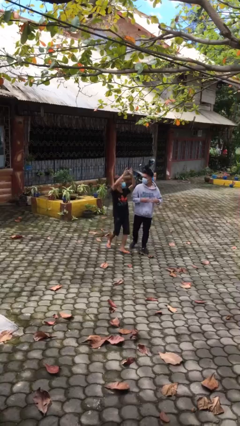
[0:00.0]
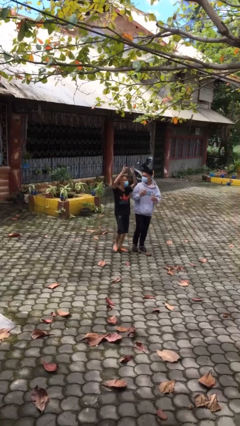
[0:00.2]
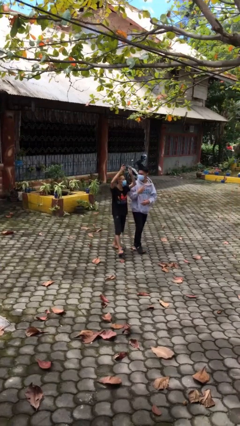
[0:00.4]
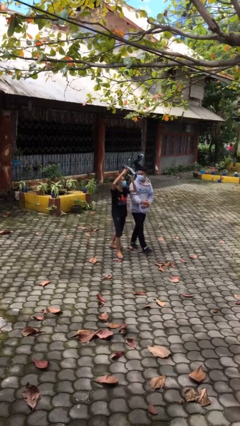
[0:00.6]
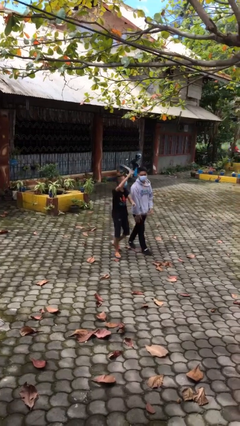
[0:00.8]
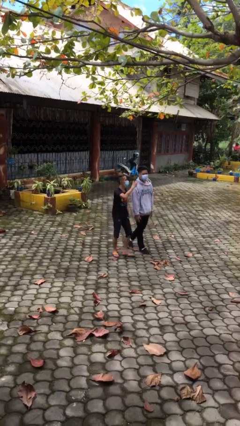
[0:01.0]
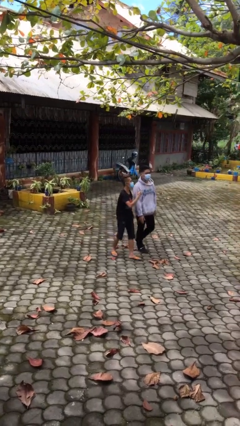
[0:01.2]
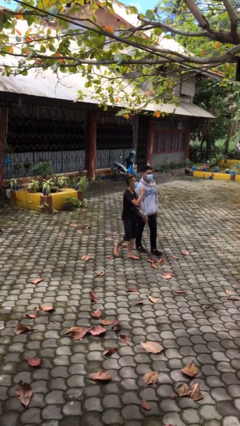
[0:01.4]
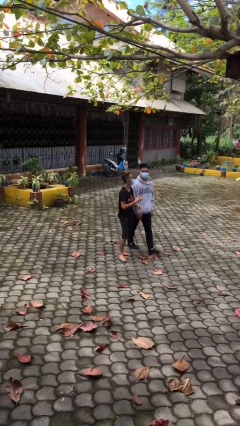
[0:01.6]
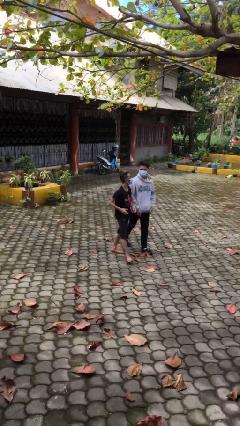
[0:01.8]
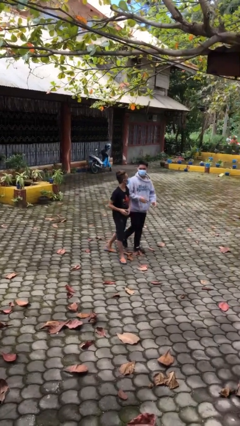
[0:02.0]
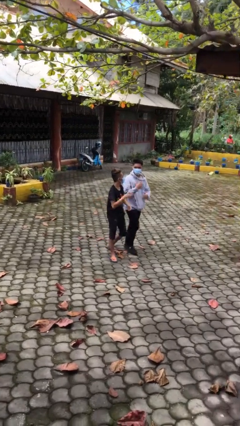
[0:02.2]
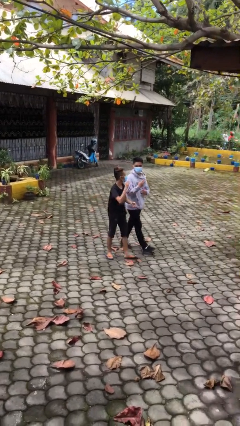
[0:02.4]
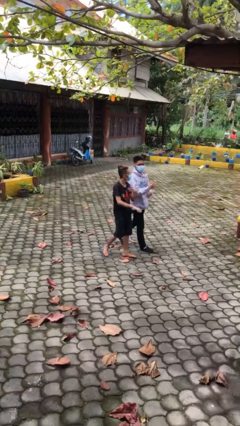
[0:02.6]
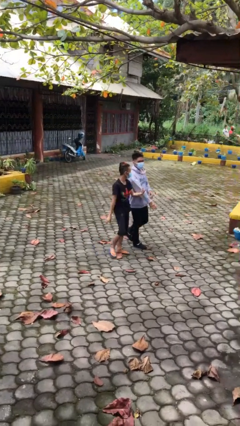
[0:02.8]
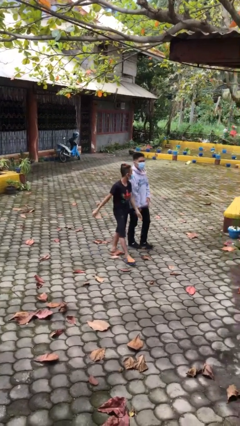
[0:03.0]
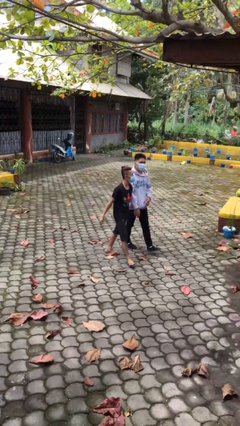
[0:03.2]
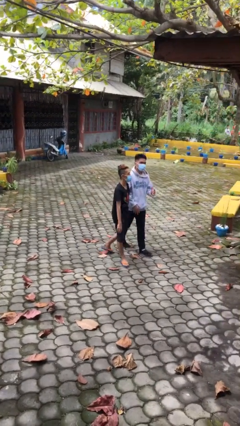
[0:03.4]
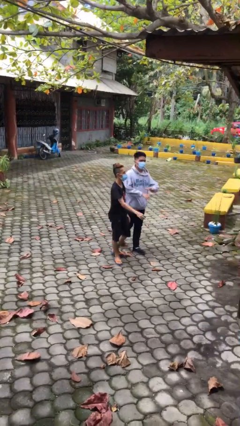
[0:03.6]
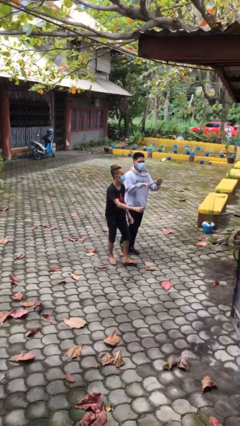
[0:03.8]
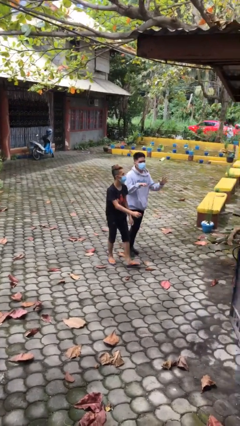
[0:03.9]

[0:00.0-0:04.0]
person talks to person

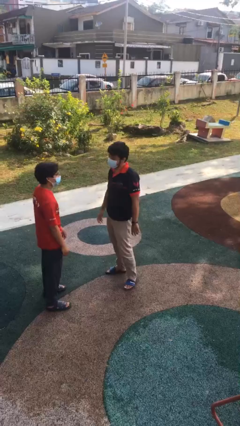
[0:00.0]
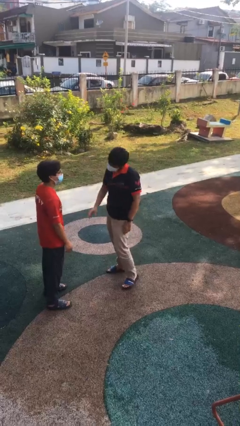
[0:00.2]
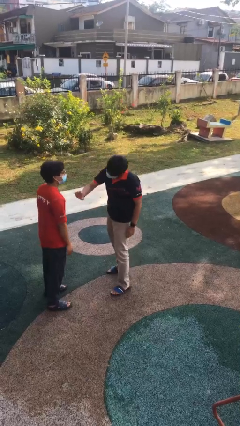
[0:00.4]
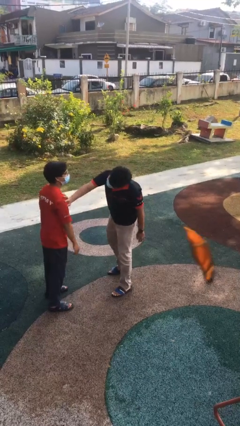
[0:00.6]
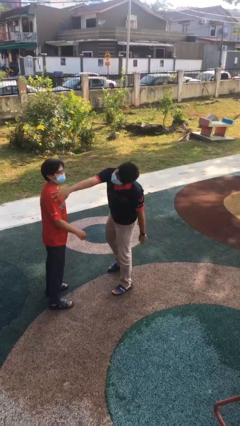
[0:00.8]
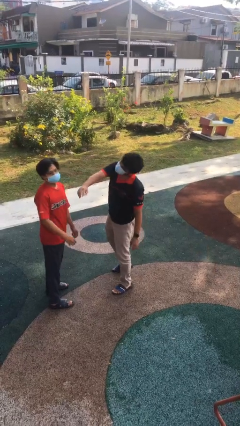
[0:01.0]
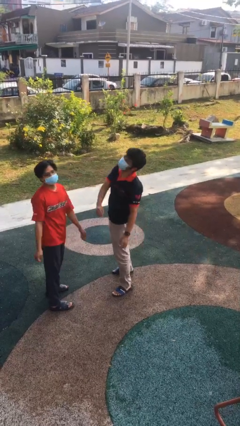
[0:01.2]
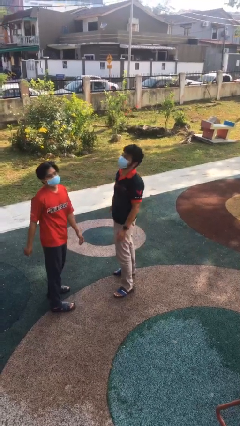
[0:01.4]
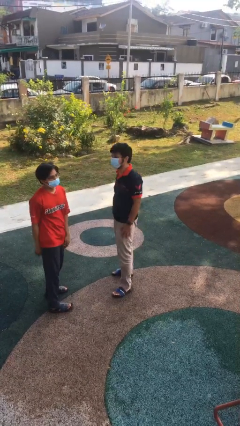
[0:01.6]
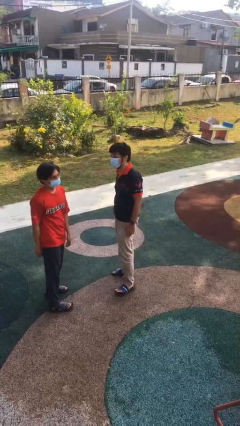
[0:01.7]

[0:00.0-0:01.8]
person shoves person

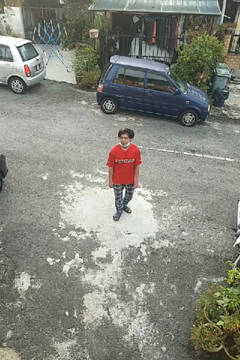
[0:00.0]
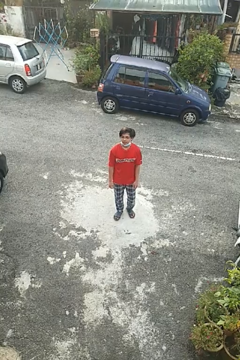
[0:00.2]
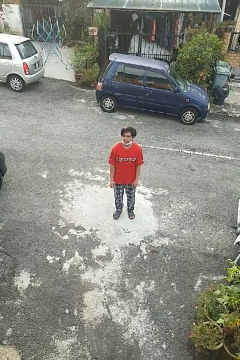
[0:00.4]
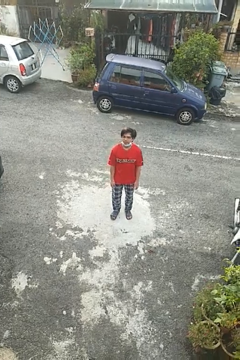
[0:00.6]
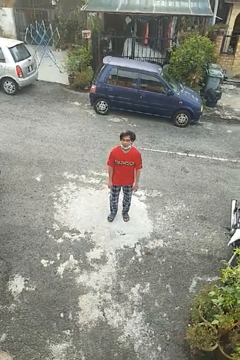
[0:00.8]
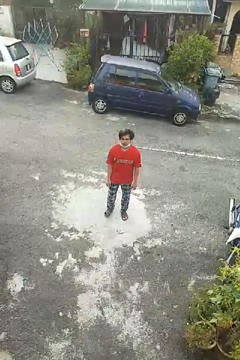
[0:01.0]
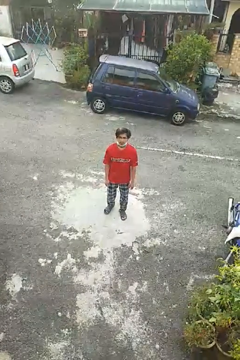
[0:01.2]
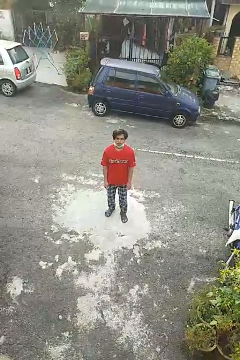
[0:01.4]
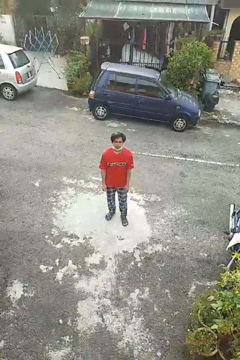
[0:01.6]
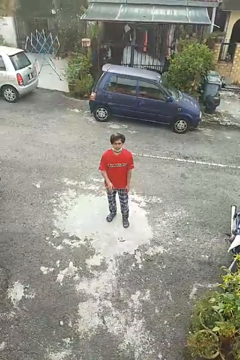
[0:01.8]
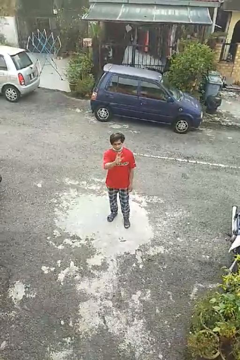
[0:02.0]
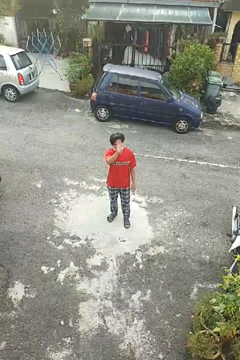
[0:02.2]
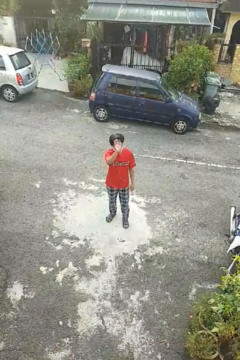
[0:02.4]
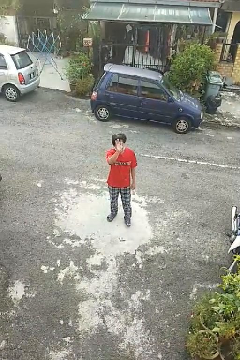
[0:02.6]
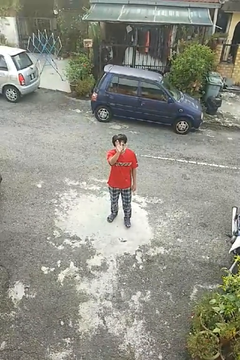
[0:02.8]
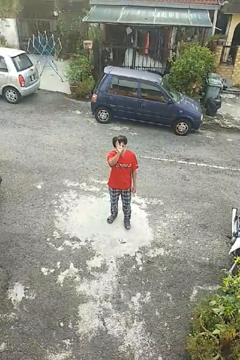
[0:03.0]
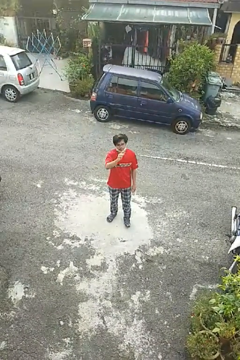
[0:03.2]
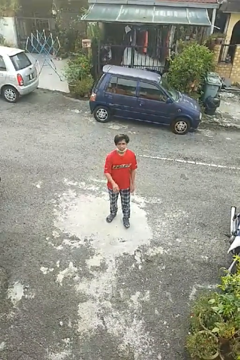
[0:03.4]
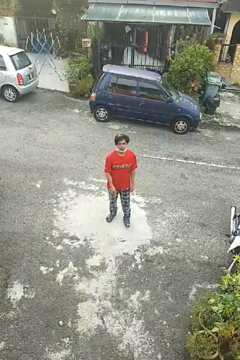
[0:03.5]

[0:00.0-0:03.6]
person waves at person

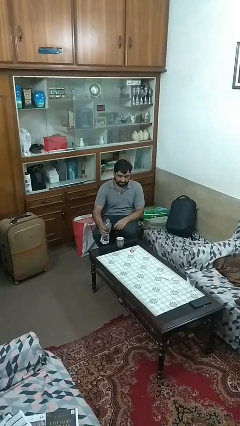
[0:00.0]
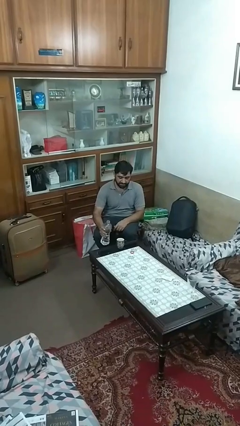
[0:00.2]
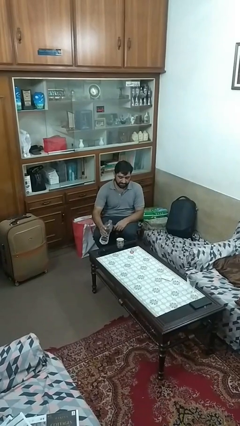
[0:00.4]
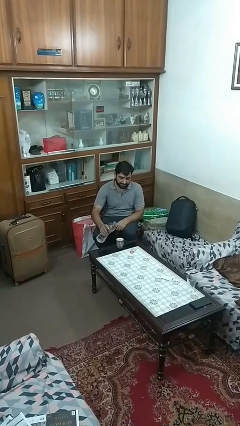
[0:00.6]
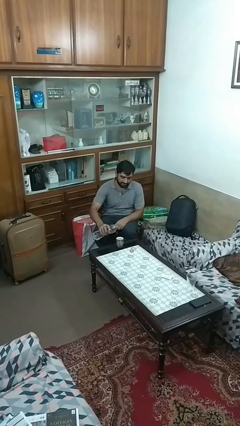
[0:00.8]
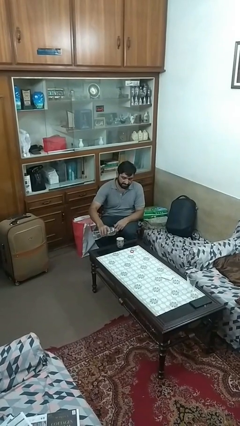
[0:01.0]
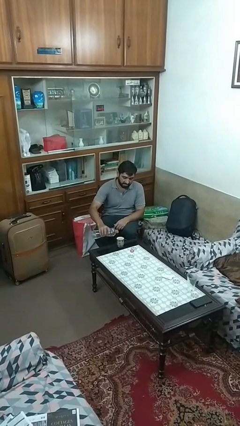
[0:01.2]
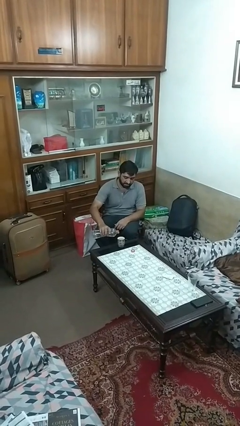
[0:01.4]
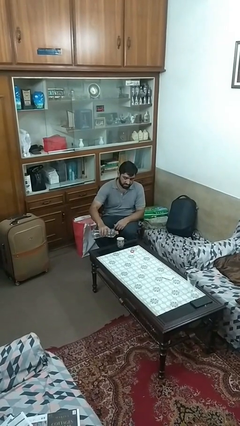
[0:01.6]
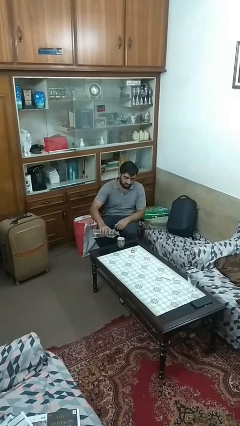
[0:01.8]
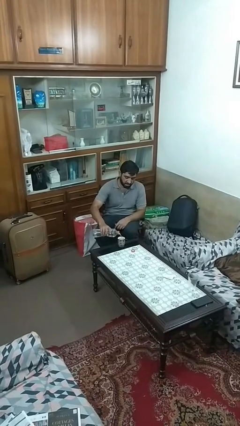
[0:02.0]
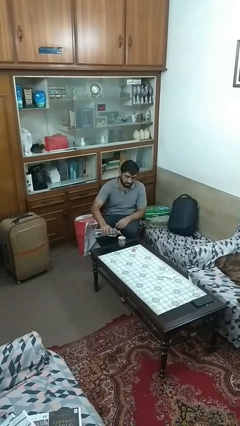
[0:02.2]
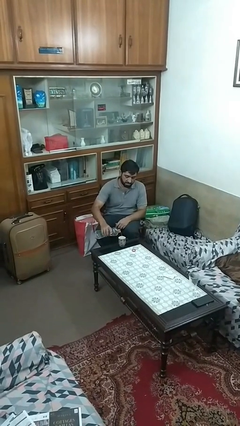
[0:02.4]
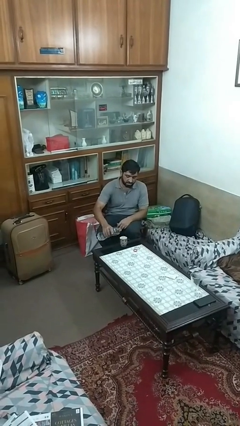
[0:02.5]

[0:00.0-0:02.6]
person pours liquid into cup

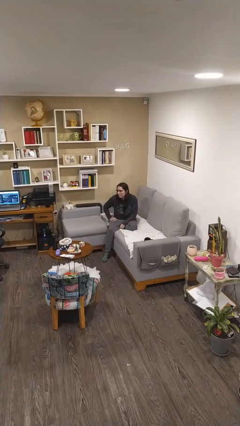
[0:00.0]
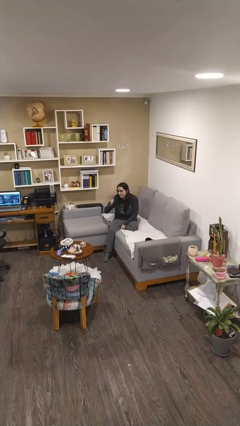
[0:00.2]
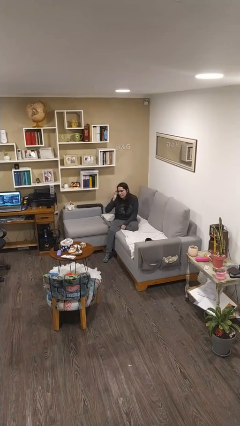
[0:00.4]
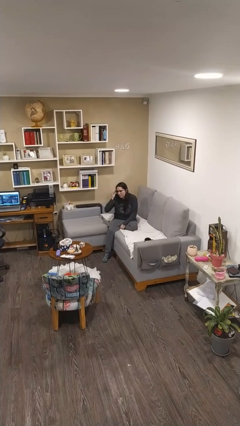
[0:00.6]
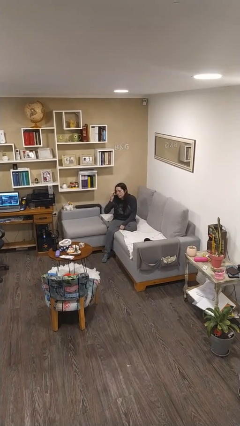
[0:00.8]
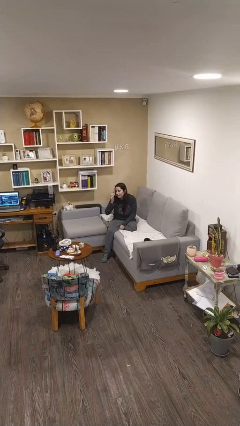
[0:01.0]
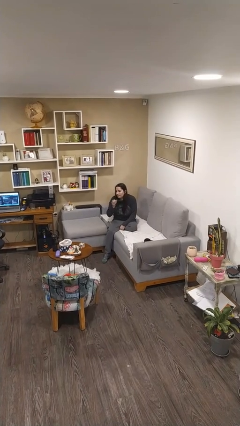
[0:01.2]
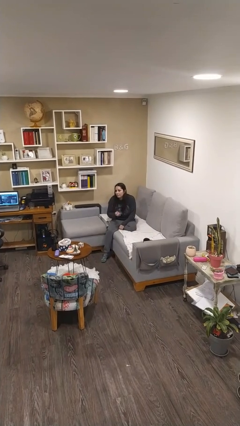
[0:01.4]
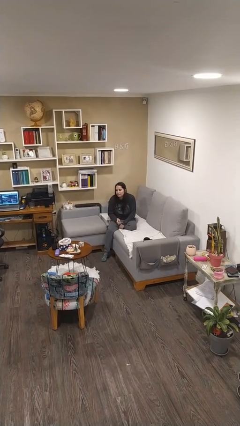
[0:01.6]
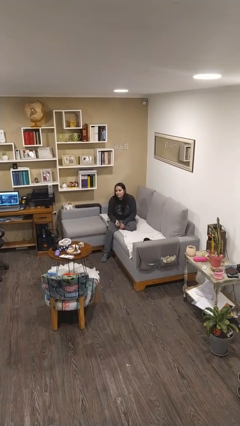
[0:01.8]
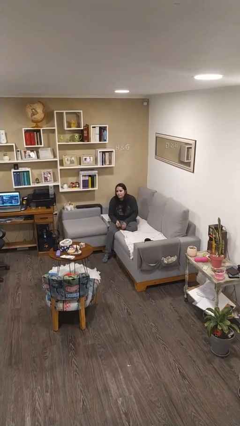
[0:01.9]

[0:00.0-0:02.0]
person takes off glasses

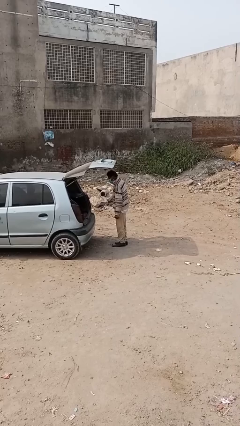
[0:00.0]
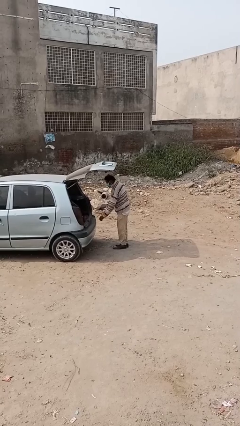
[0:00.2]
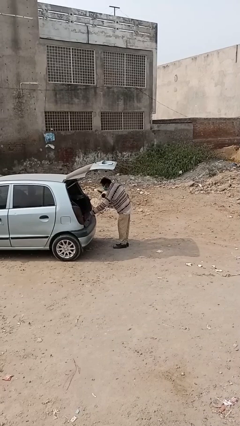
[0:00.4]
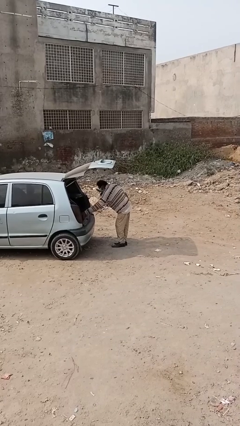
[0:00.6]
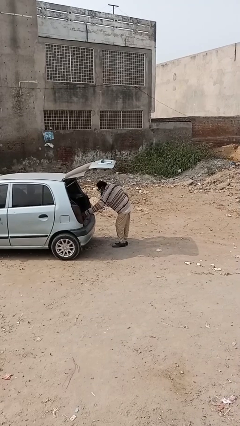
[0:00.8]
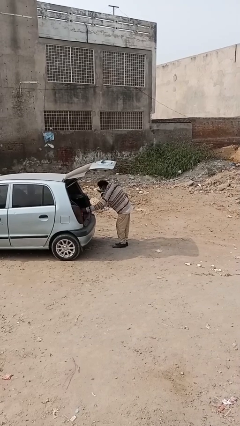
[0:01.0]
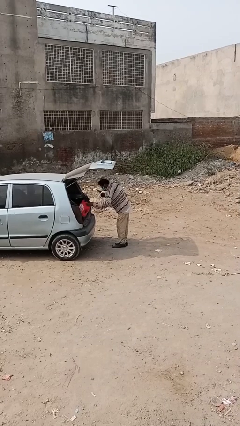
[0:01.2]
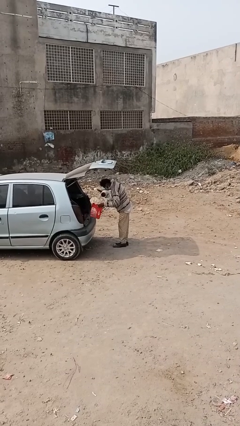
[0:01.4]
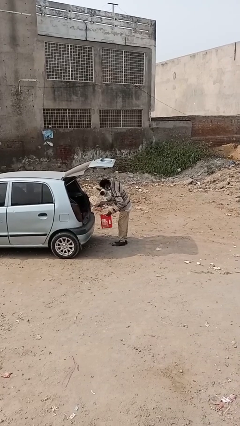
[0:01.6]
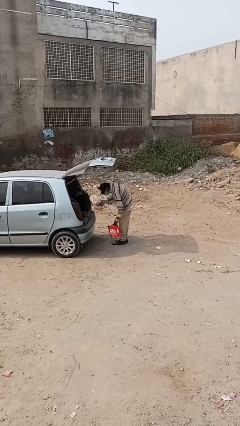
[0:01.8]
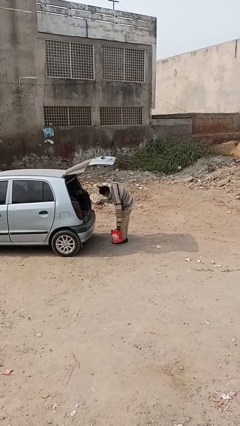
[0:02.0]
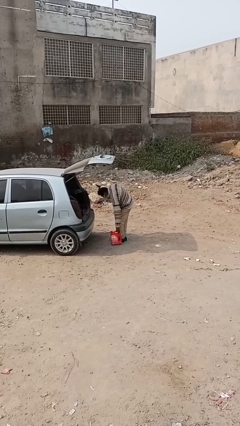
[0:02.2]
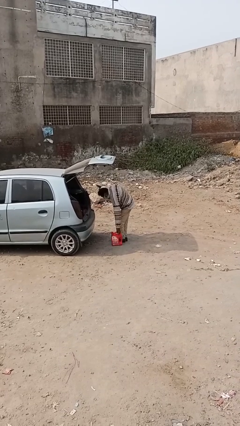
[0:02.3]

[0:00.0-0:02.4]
person unloads car

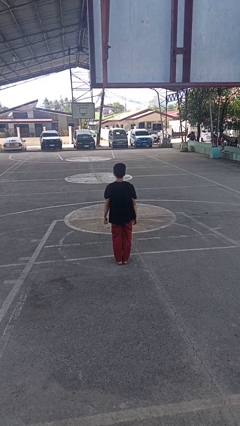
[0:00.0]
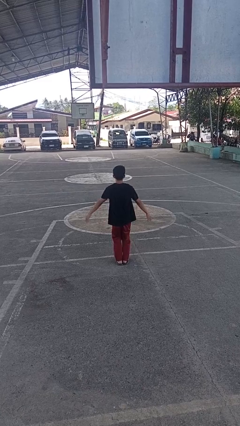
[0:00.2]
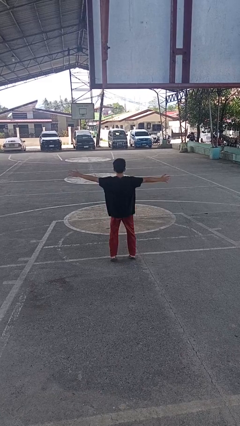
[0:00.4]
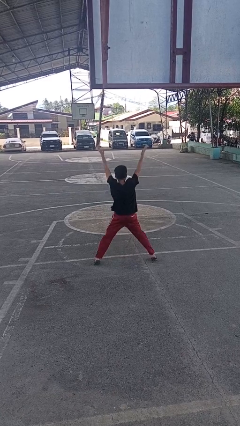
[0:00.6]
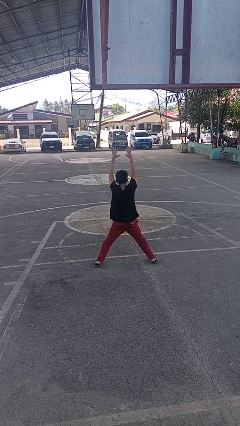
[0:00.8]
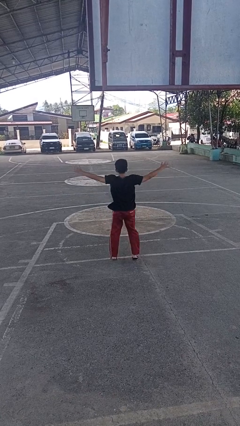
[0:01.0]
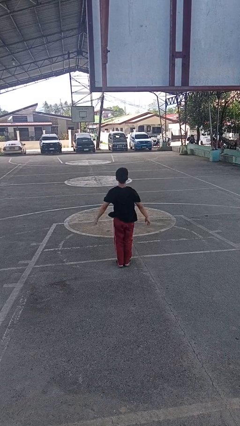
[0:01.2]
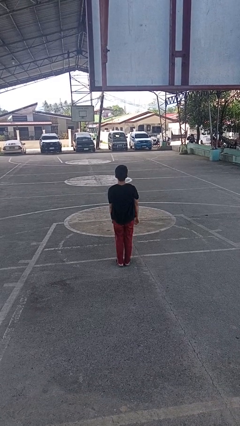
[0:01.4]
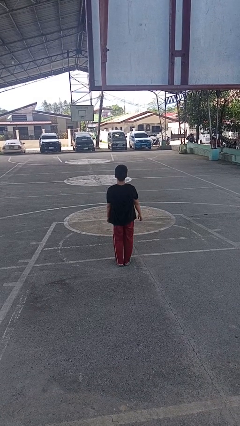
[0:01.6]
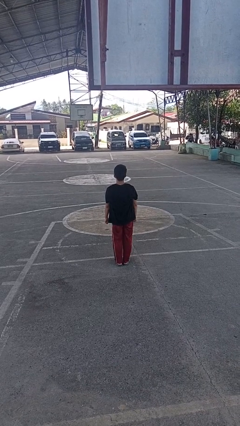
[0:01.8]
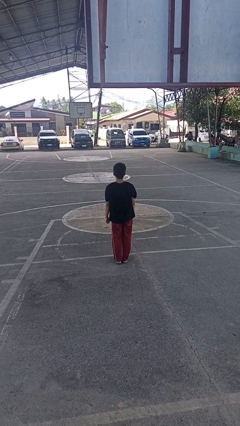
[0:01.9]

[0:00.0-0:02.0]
person exercises with jumping jacks
